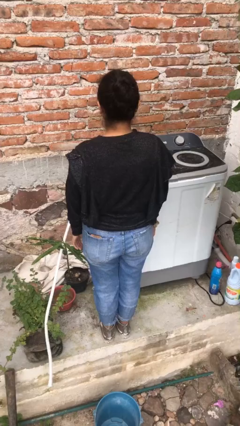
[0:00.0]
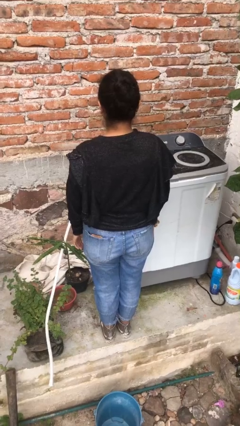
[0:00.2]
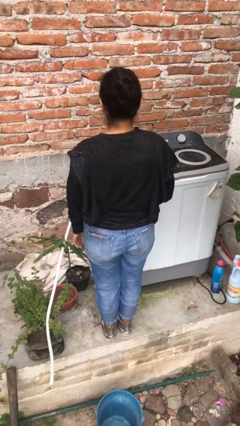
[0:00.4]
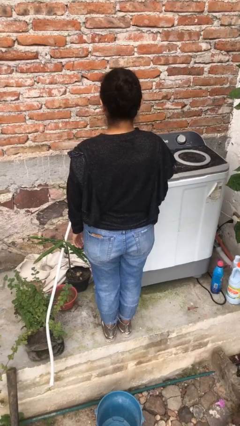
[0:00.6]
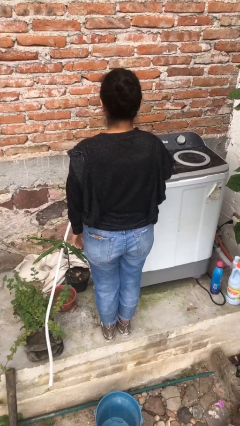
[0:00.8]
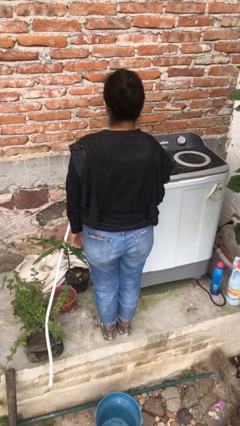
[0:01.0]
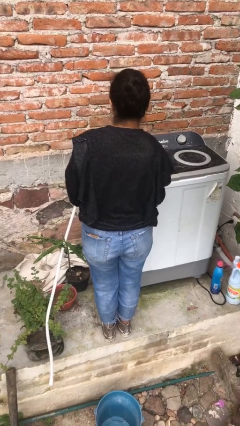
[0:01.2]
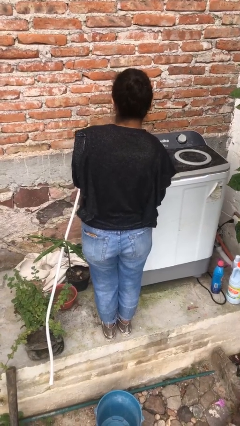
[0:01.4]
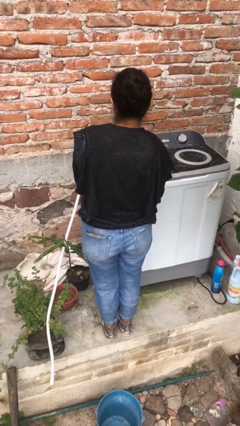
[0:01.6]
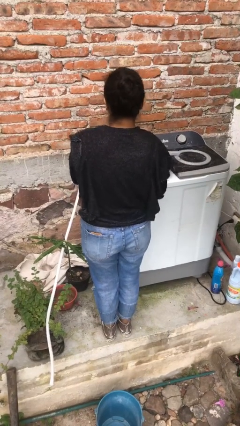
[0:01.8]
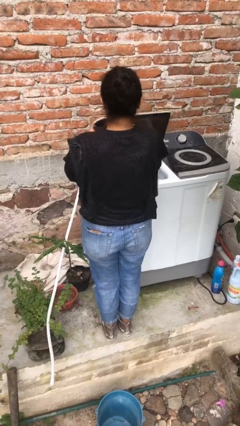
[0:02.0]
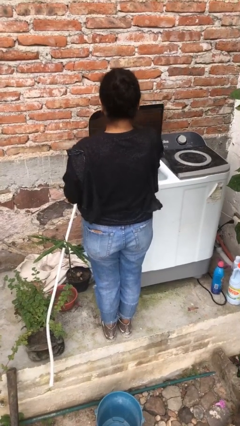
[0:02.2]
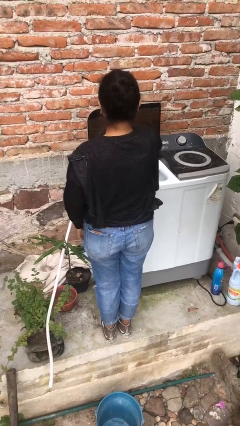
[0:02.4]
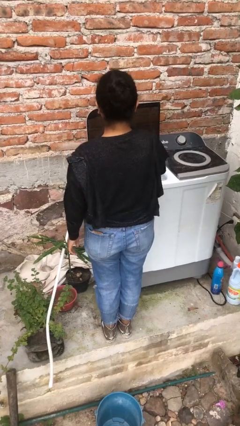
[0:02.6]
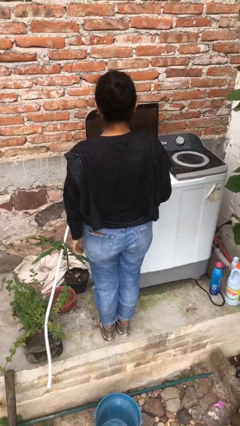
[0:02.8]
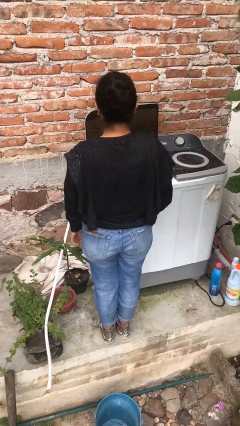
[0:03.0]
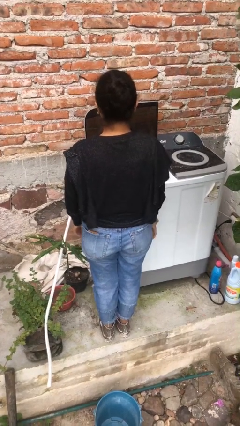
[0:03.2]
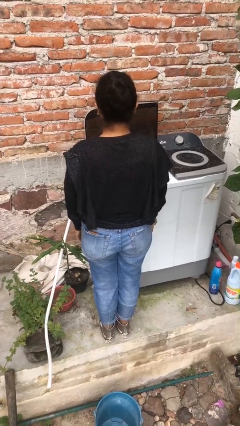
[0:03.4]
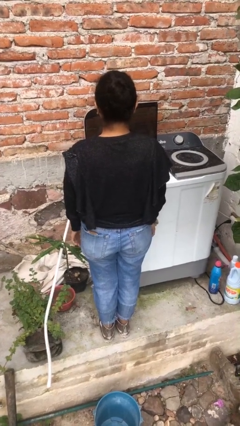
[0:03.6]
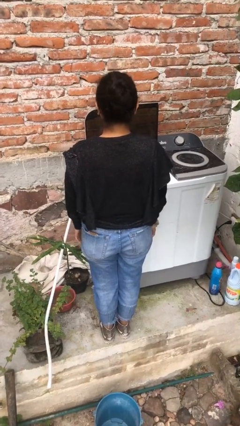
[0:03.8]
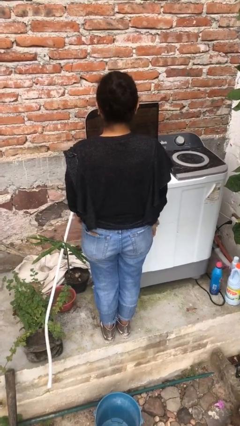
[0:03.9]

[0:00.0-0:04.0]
person opens clothes washer

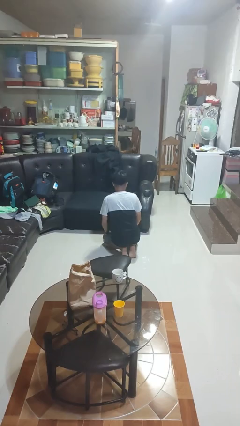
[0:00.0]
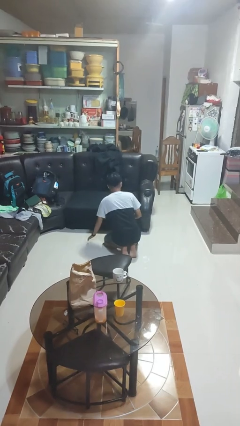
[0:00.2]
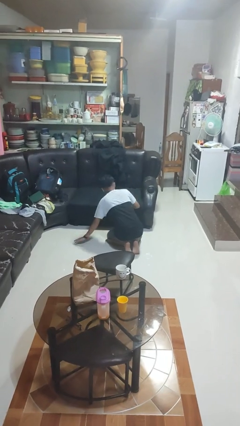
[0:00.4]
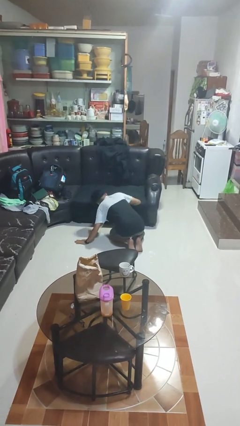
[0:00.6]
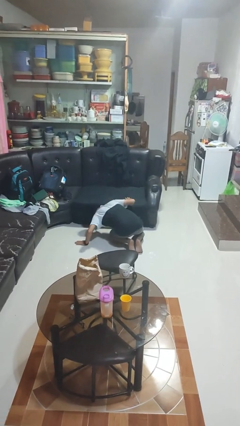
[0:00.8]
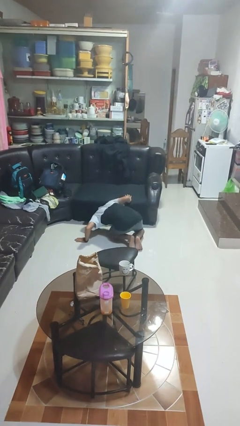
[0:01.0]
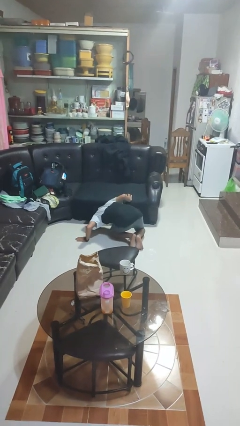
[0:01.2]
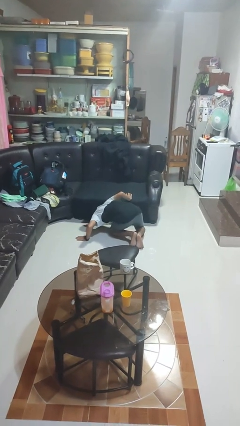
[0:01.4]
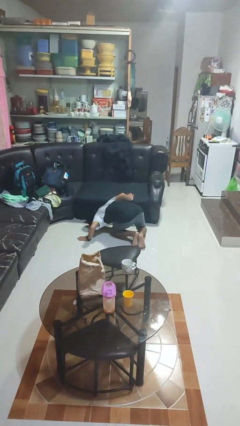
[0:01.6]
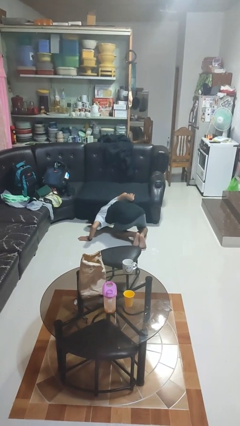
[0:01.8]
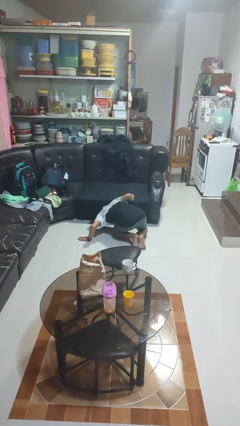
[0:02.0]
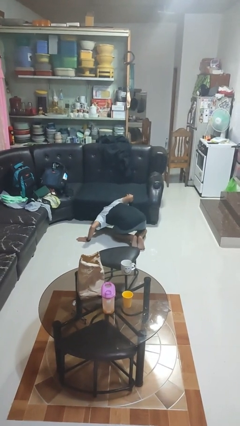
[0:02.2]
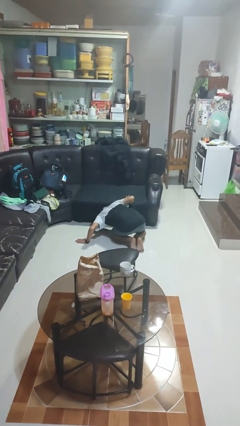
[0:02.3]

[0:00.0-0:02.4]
person searches under couch

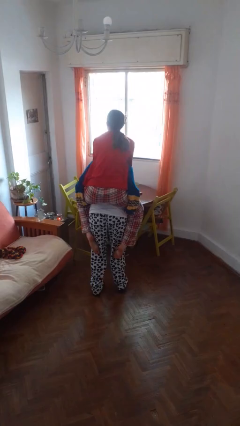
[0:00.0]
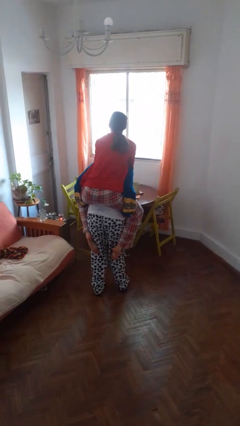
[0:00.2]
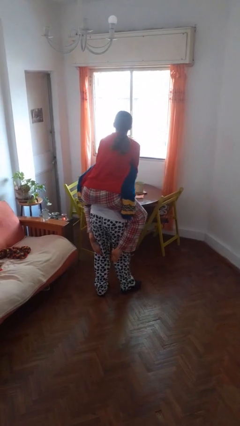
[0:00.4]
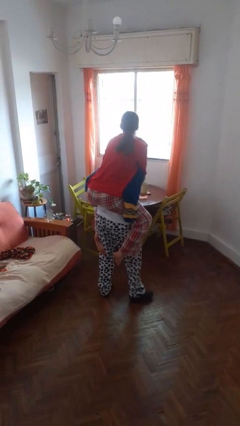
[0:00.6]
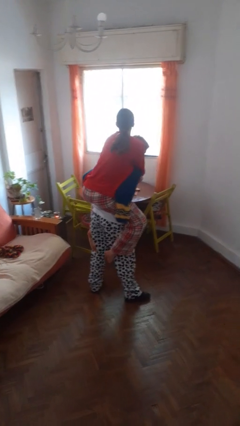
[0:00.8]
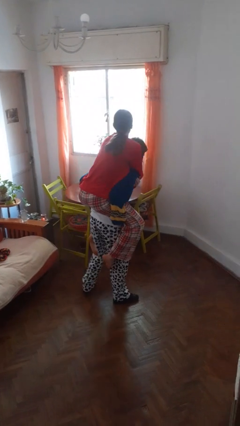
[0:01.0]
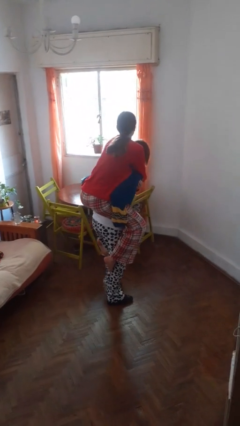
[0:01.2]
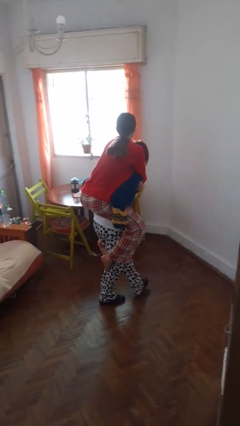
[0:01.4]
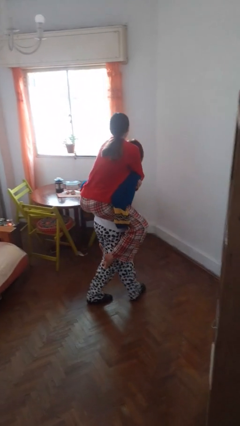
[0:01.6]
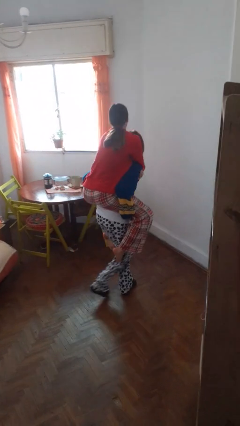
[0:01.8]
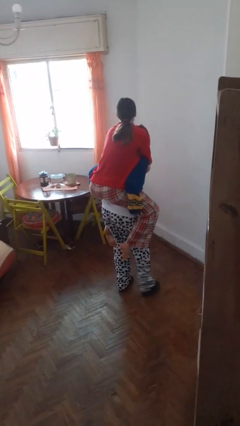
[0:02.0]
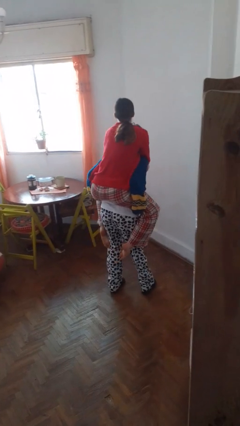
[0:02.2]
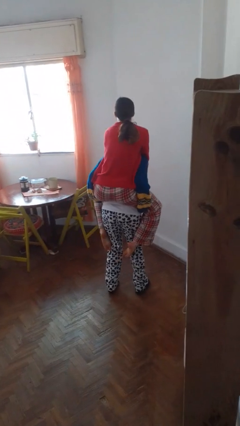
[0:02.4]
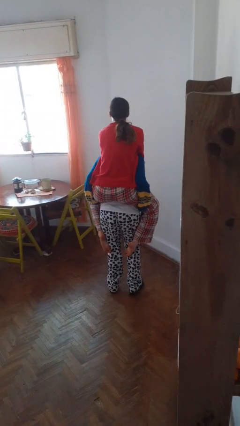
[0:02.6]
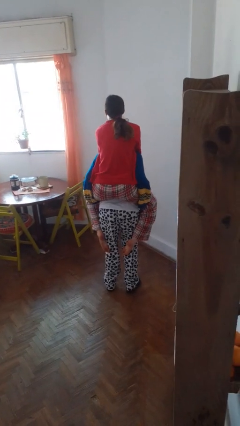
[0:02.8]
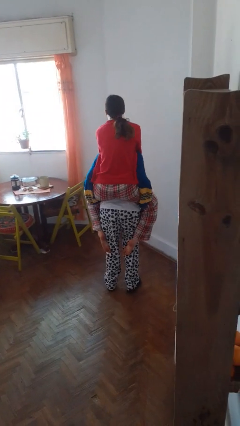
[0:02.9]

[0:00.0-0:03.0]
person carries person on back

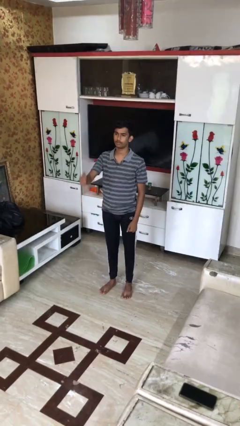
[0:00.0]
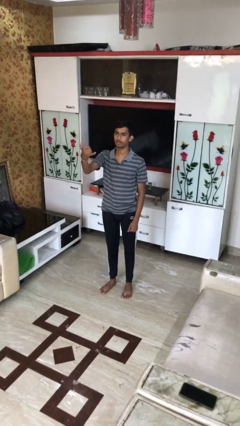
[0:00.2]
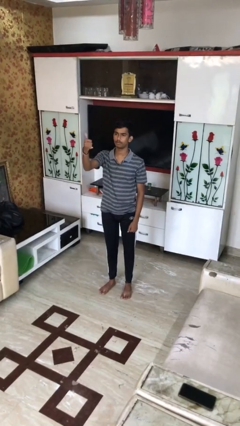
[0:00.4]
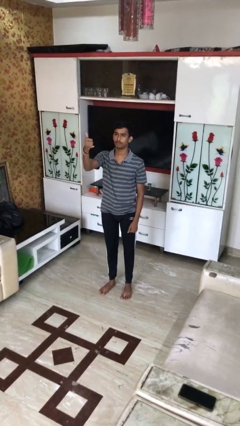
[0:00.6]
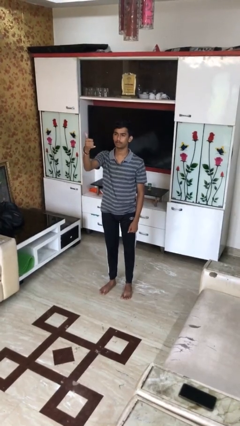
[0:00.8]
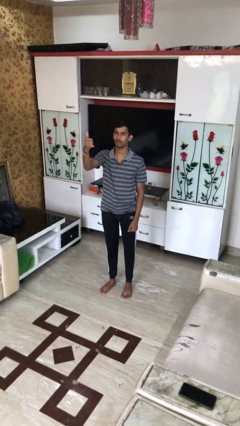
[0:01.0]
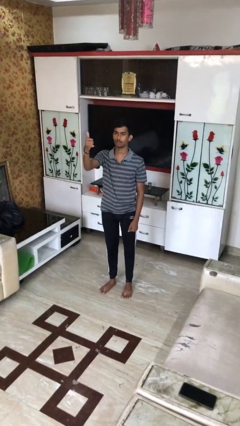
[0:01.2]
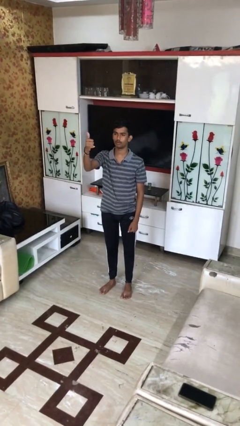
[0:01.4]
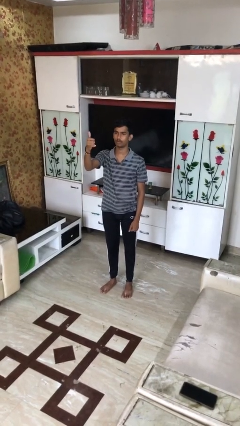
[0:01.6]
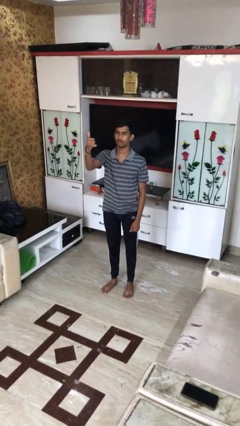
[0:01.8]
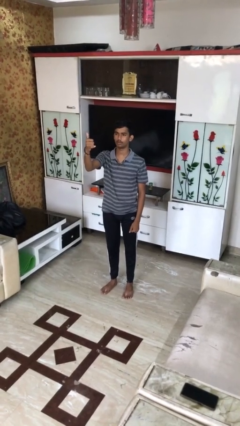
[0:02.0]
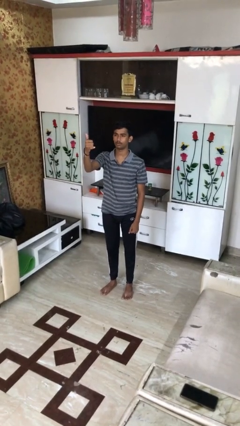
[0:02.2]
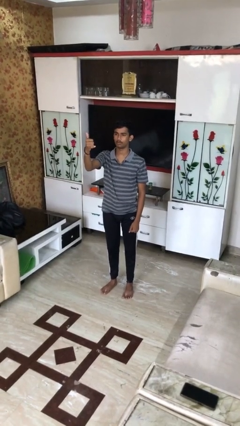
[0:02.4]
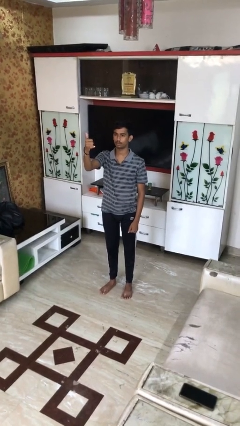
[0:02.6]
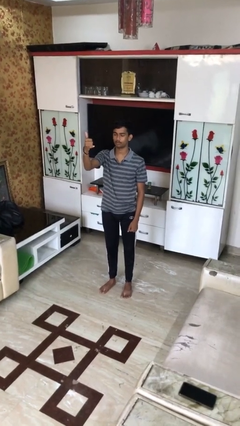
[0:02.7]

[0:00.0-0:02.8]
person gestures hang loose

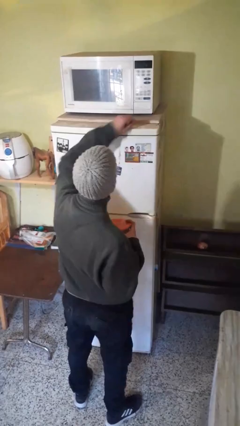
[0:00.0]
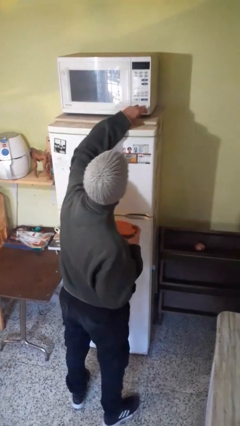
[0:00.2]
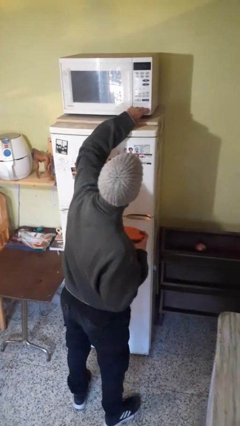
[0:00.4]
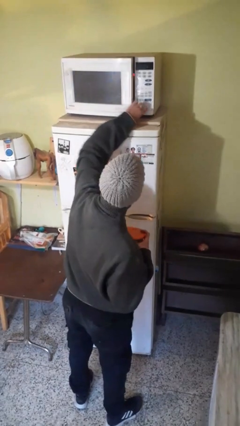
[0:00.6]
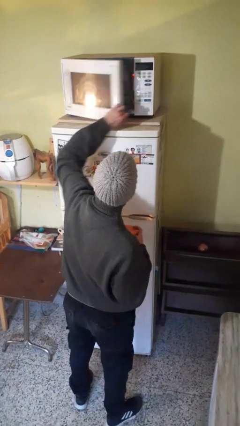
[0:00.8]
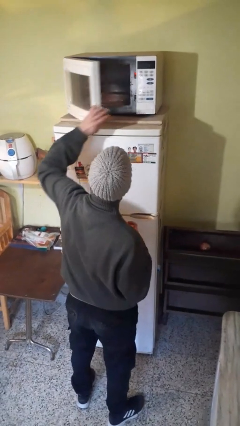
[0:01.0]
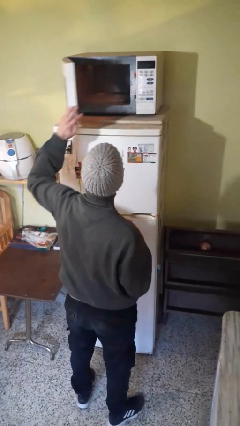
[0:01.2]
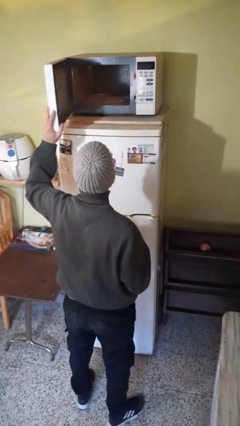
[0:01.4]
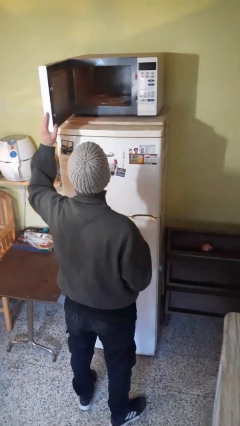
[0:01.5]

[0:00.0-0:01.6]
person opens microwave

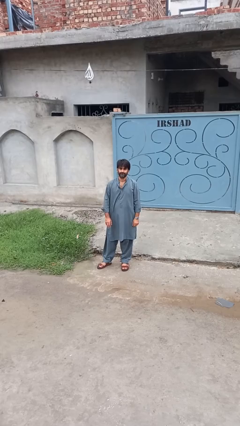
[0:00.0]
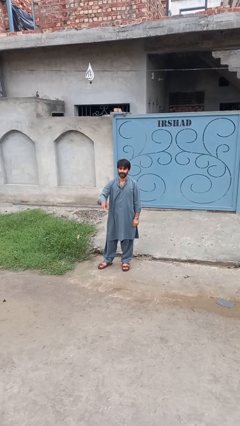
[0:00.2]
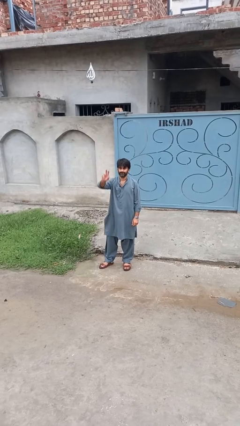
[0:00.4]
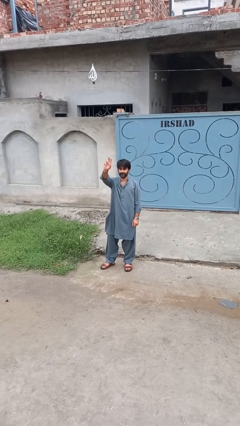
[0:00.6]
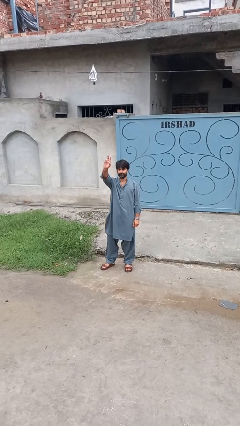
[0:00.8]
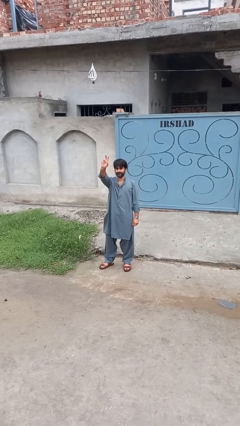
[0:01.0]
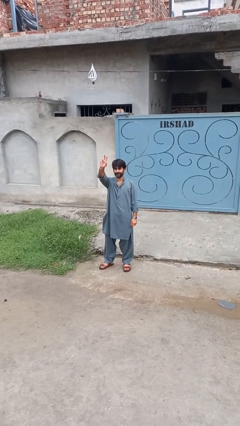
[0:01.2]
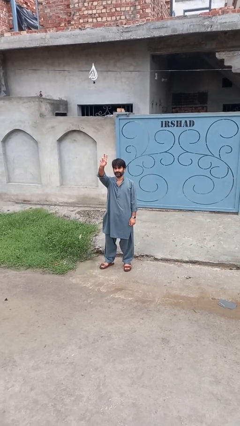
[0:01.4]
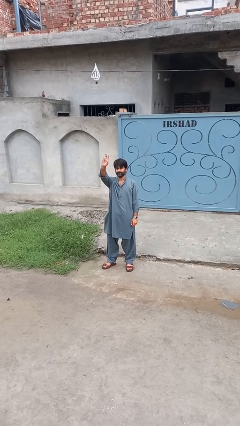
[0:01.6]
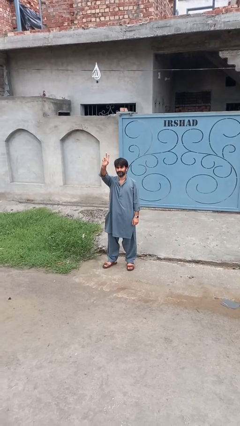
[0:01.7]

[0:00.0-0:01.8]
person gestures raise hand

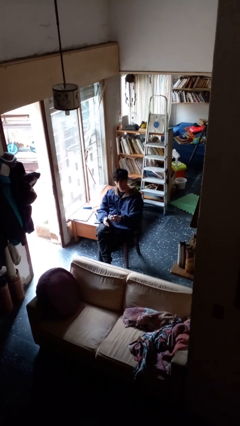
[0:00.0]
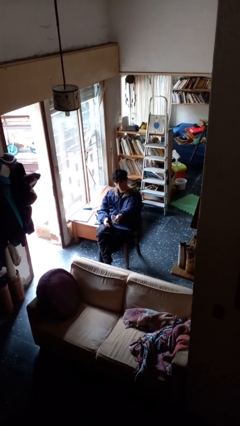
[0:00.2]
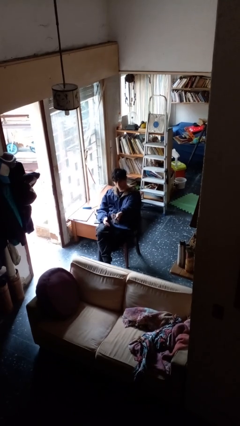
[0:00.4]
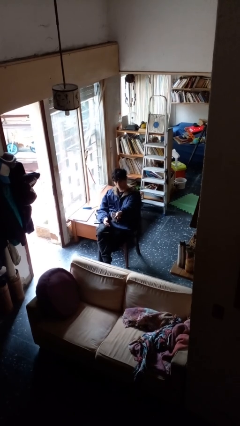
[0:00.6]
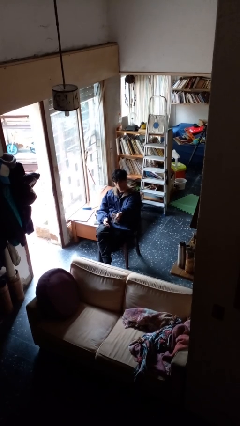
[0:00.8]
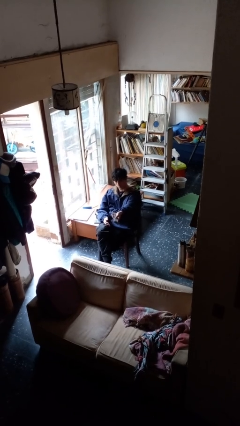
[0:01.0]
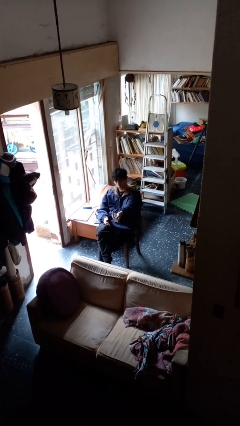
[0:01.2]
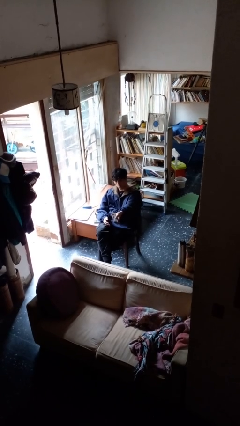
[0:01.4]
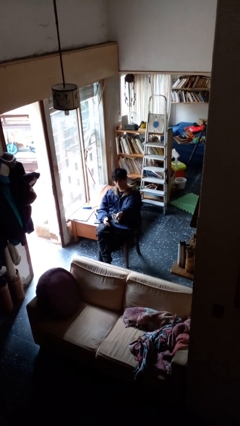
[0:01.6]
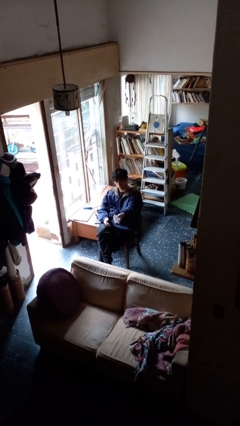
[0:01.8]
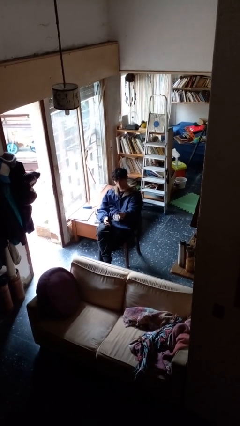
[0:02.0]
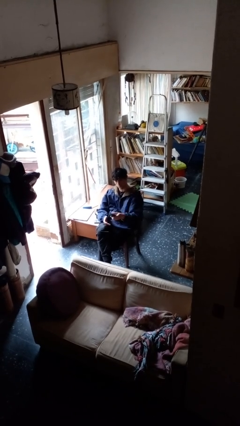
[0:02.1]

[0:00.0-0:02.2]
person uses television remote
